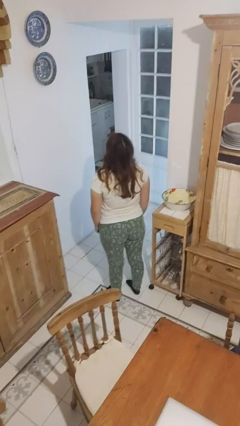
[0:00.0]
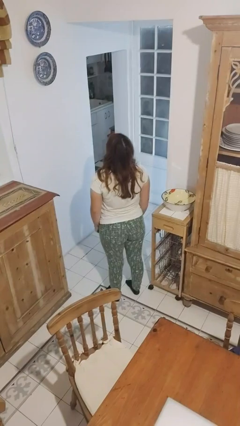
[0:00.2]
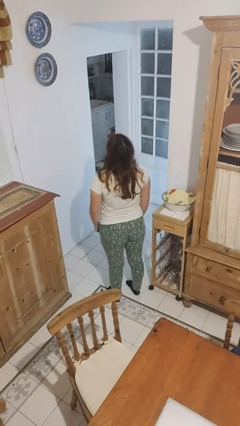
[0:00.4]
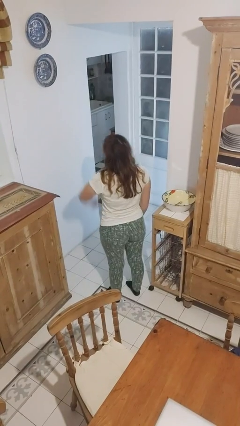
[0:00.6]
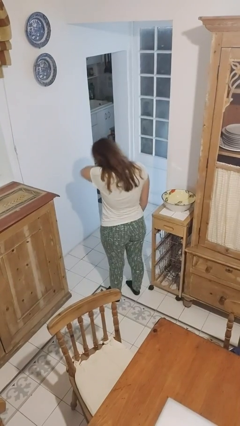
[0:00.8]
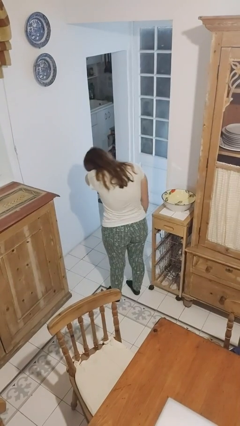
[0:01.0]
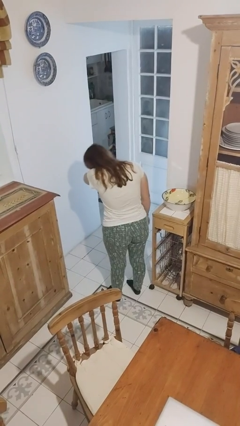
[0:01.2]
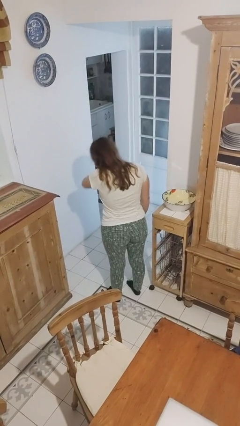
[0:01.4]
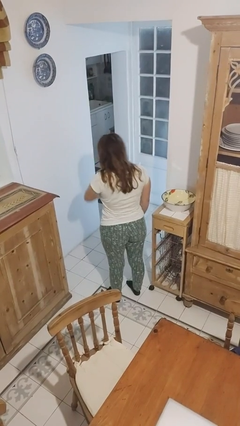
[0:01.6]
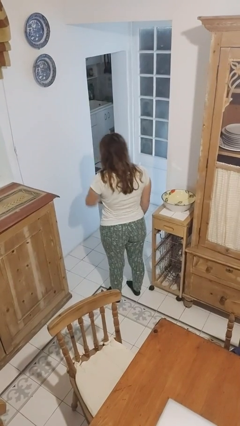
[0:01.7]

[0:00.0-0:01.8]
person sneezes into arm

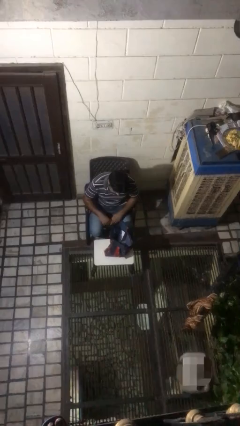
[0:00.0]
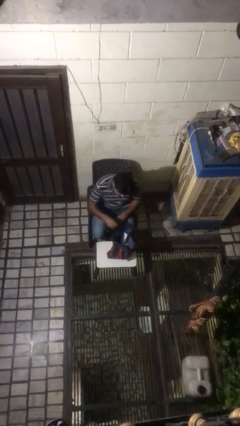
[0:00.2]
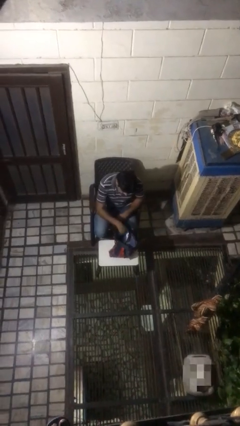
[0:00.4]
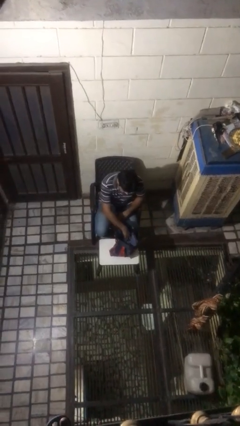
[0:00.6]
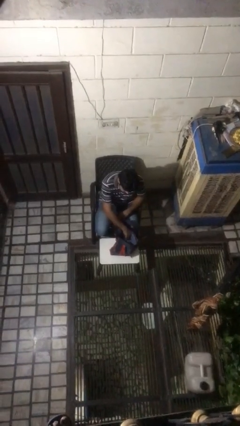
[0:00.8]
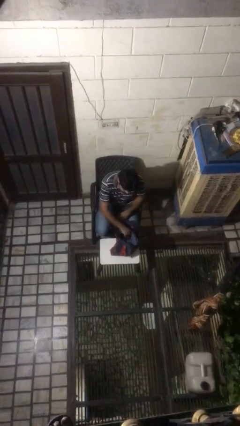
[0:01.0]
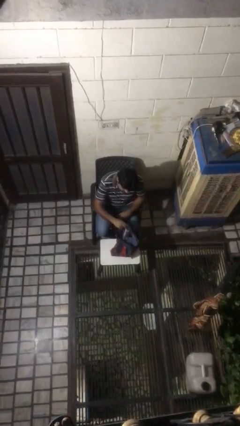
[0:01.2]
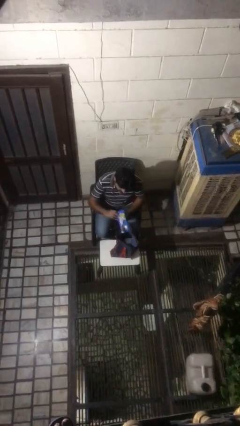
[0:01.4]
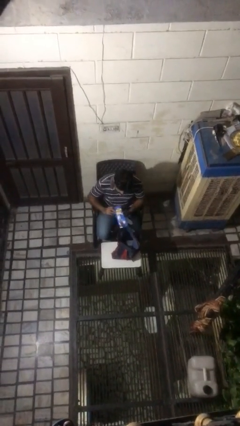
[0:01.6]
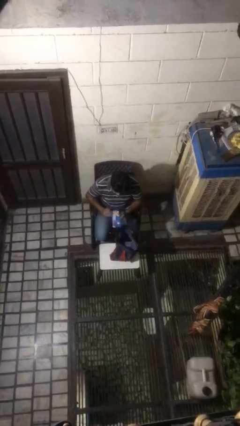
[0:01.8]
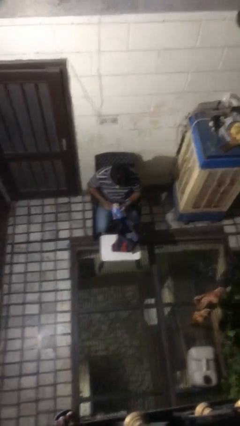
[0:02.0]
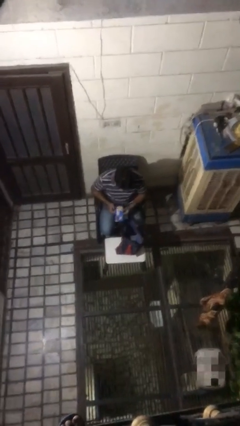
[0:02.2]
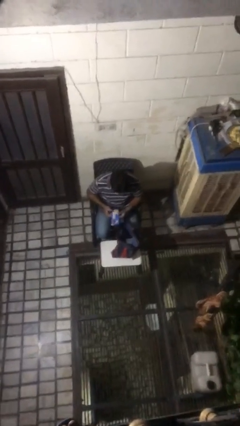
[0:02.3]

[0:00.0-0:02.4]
person takes object from bag

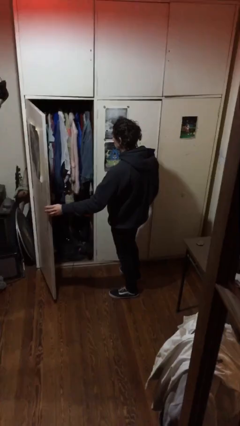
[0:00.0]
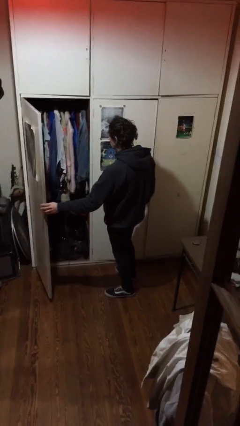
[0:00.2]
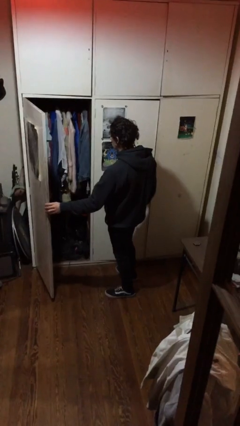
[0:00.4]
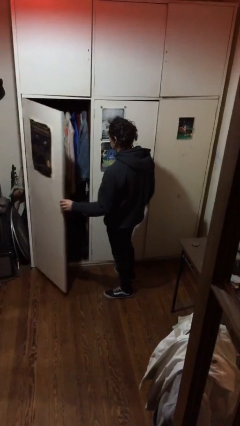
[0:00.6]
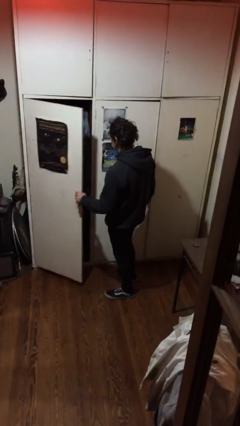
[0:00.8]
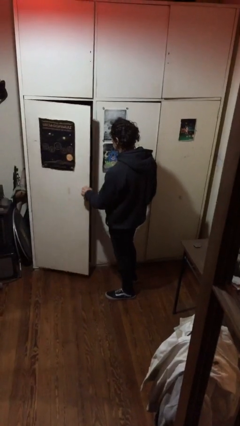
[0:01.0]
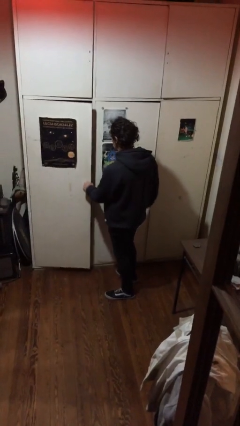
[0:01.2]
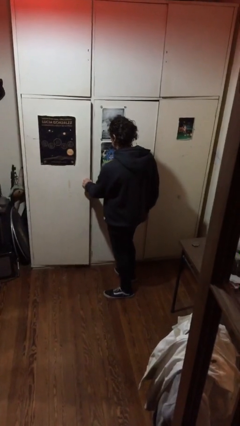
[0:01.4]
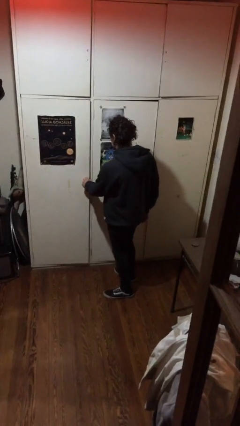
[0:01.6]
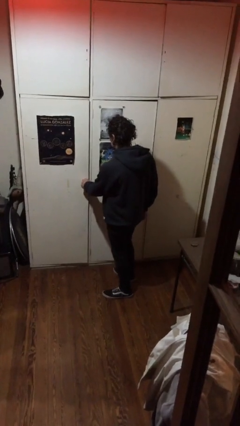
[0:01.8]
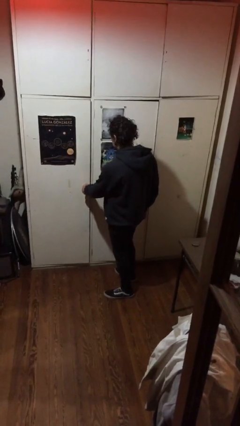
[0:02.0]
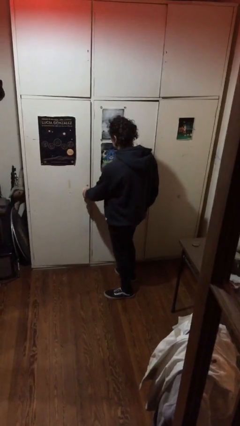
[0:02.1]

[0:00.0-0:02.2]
person closes closet door

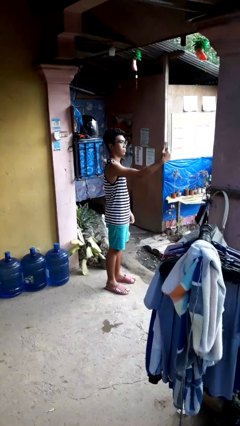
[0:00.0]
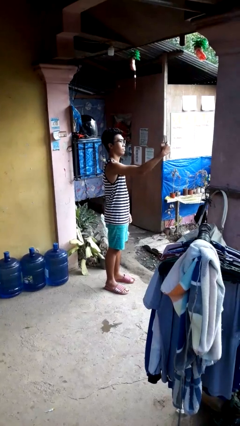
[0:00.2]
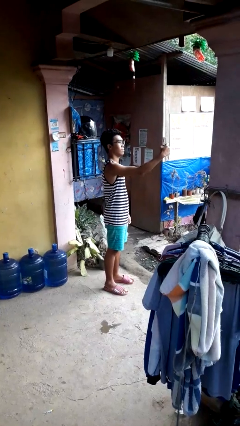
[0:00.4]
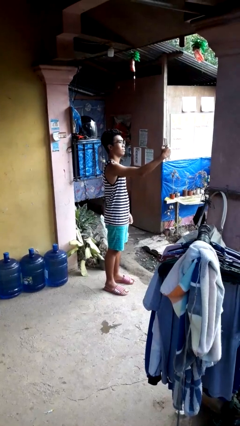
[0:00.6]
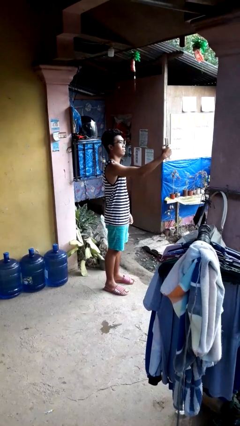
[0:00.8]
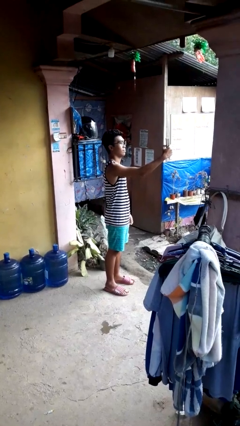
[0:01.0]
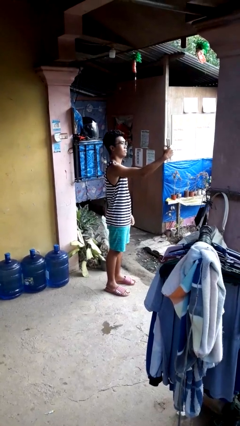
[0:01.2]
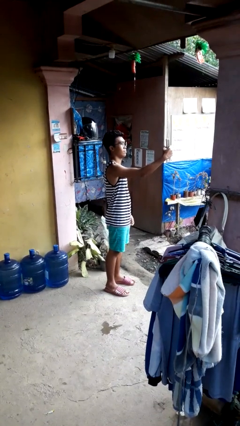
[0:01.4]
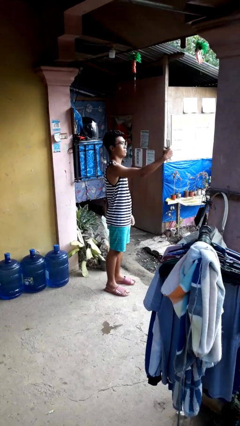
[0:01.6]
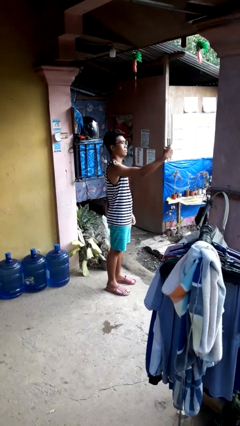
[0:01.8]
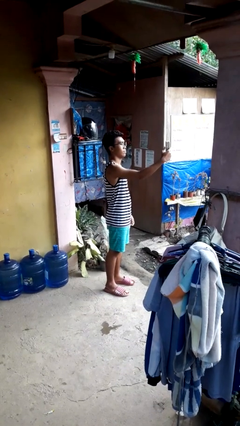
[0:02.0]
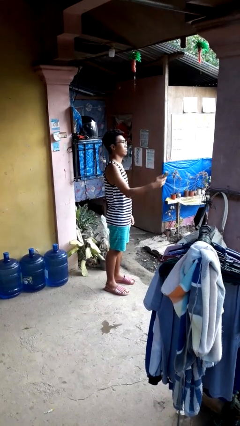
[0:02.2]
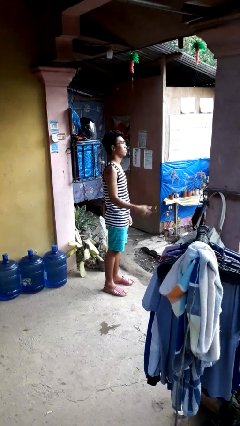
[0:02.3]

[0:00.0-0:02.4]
person takes selfie

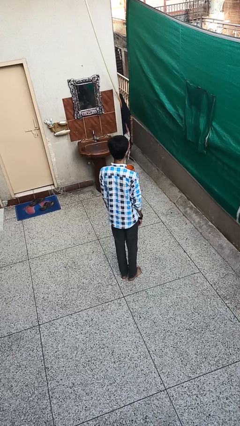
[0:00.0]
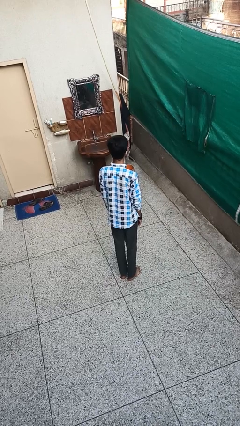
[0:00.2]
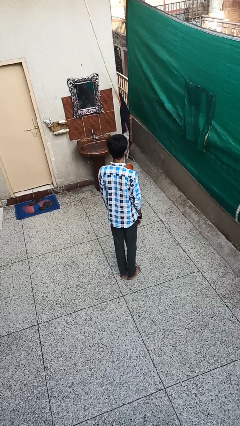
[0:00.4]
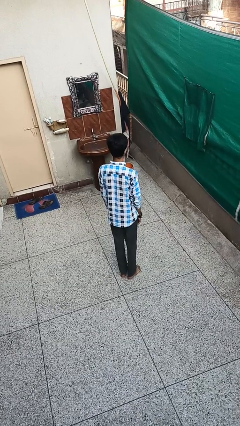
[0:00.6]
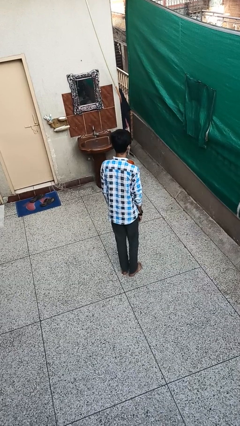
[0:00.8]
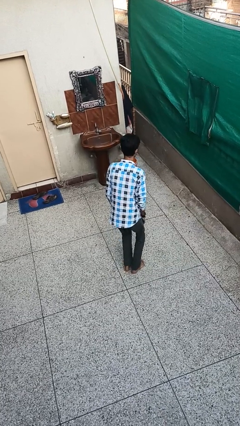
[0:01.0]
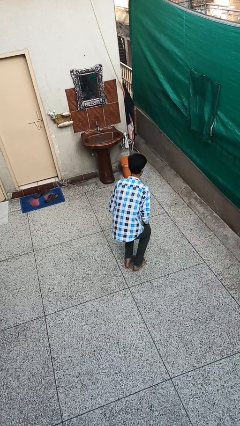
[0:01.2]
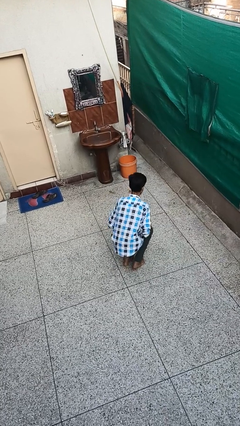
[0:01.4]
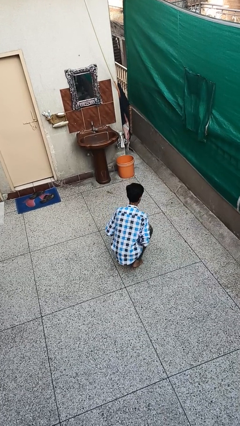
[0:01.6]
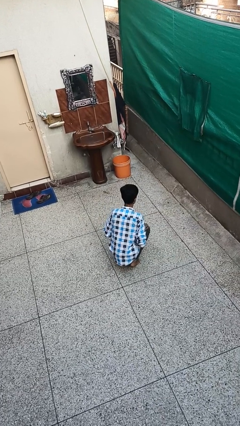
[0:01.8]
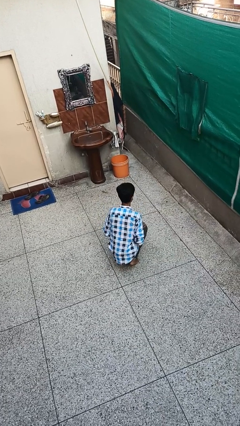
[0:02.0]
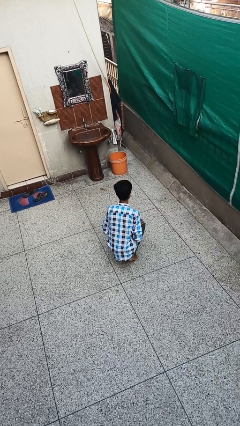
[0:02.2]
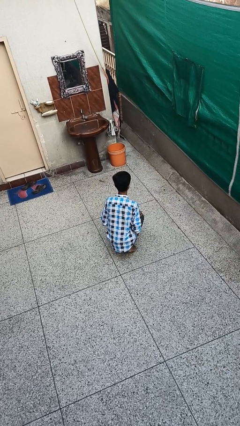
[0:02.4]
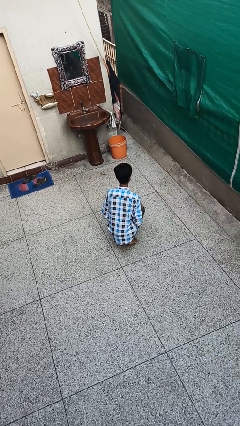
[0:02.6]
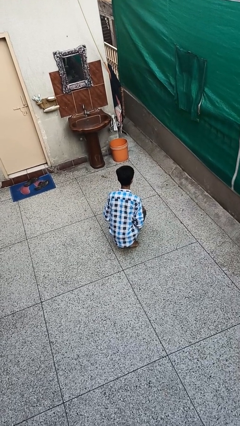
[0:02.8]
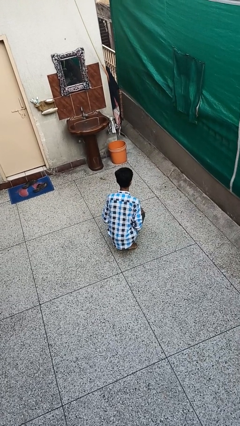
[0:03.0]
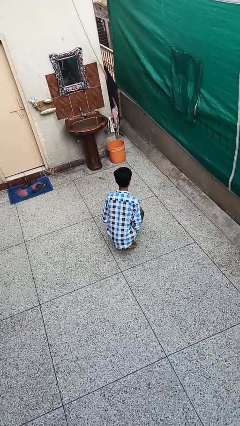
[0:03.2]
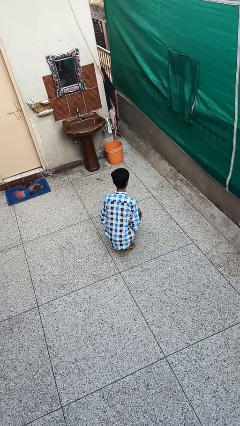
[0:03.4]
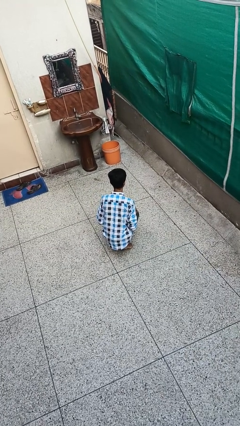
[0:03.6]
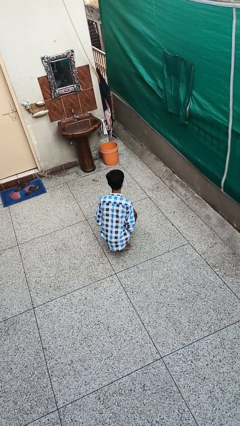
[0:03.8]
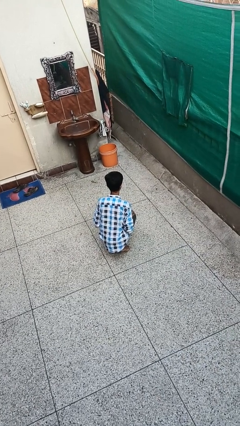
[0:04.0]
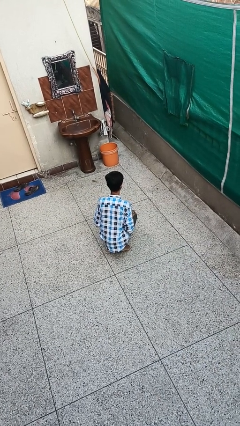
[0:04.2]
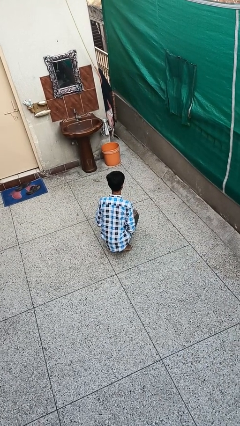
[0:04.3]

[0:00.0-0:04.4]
person squats

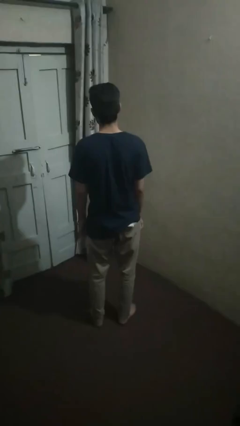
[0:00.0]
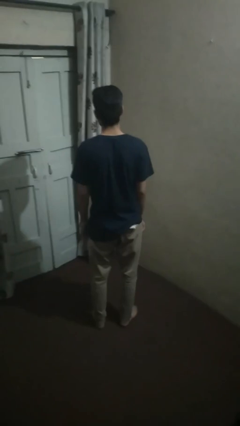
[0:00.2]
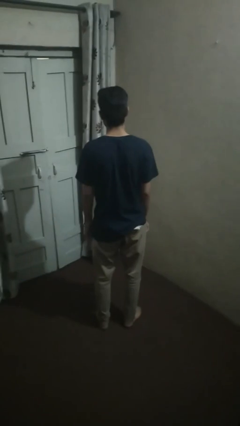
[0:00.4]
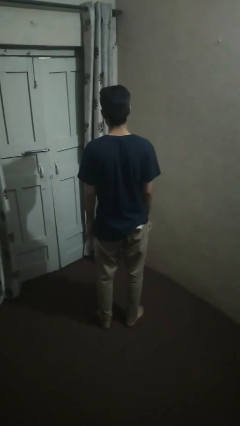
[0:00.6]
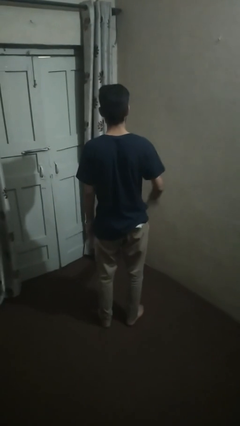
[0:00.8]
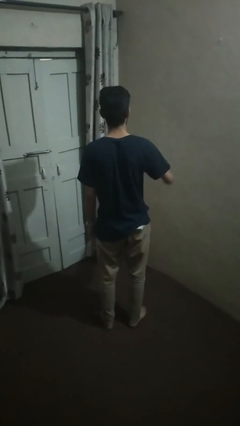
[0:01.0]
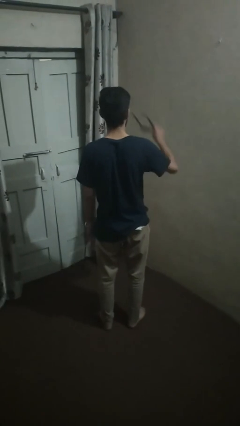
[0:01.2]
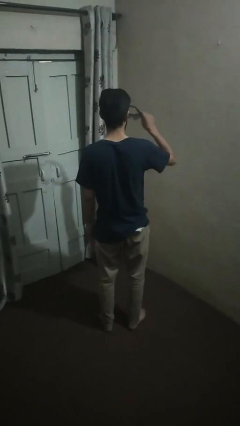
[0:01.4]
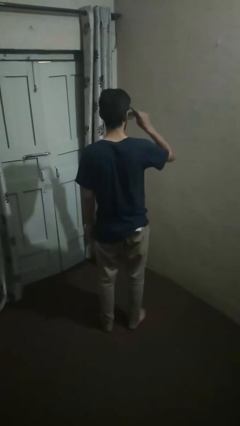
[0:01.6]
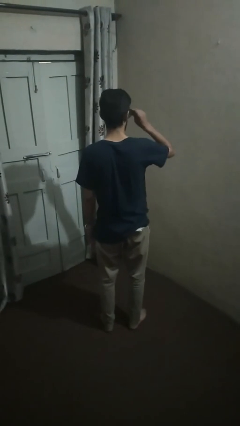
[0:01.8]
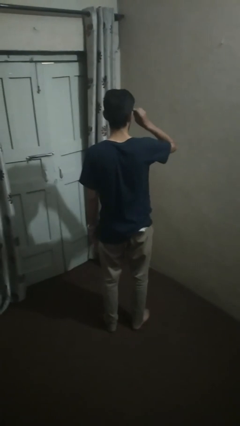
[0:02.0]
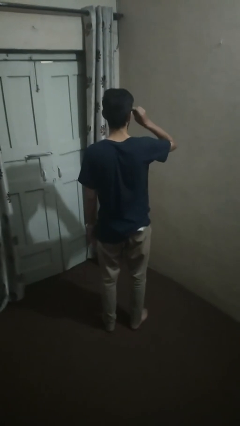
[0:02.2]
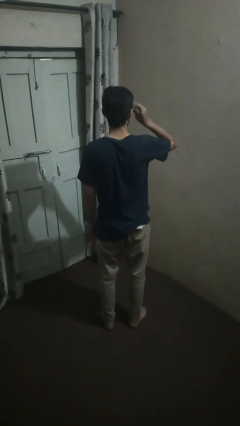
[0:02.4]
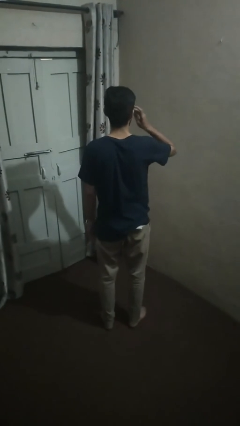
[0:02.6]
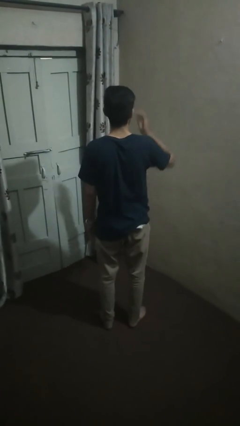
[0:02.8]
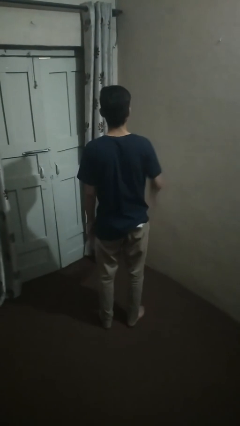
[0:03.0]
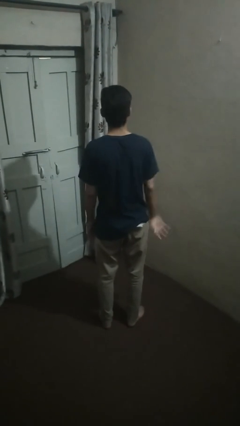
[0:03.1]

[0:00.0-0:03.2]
person puts on sunglasses

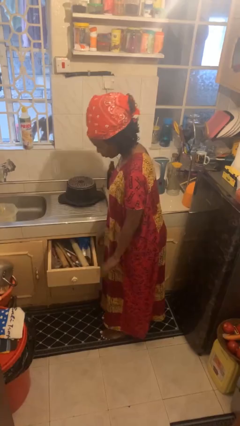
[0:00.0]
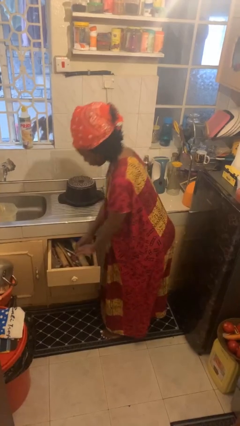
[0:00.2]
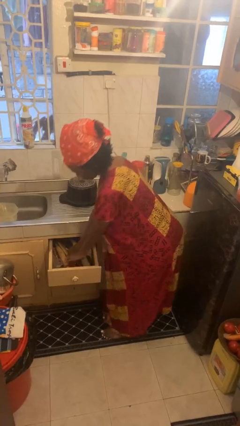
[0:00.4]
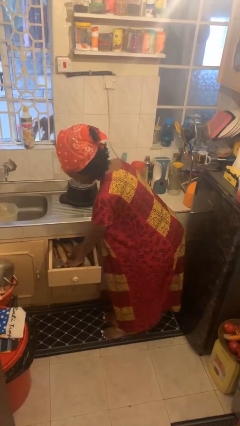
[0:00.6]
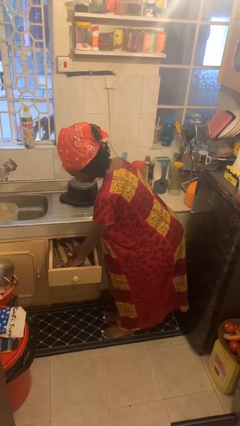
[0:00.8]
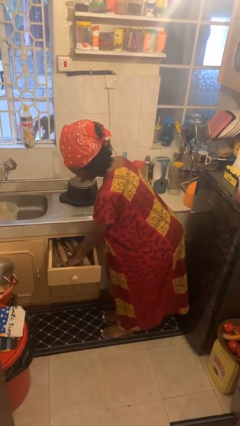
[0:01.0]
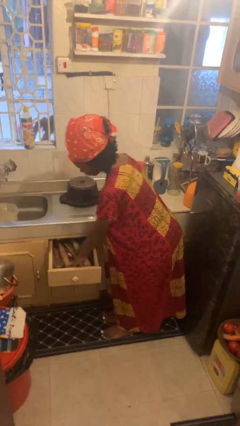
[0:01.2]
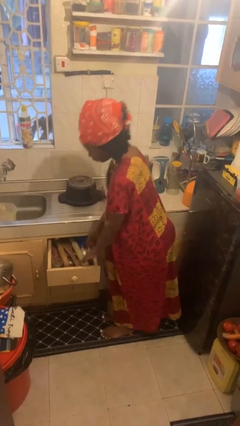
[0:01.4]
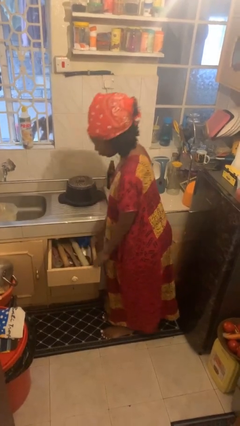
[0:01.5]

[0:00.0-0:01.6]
person searches in kitchen drawer
